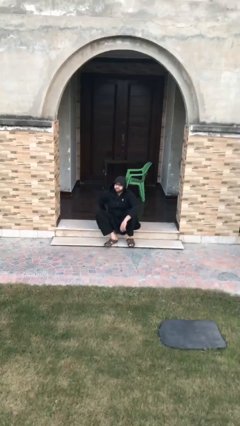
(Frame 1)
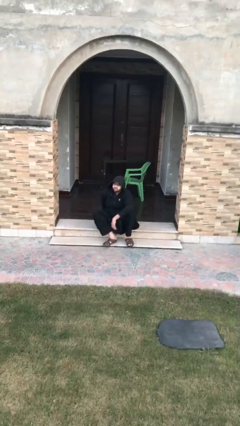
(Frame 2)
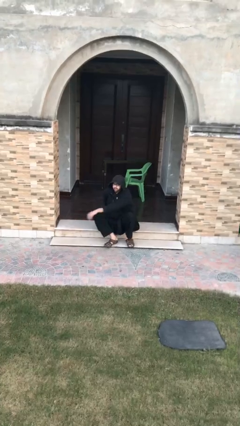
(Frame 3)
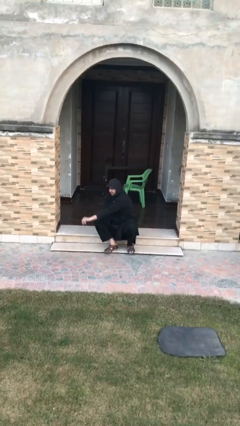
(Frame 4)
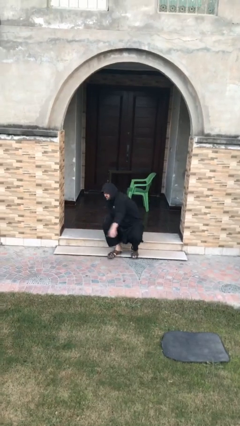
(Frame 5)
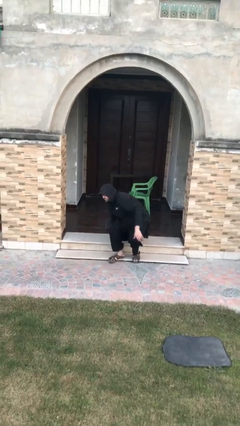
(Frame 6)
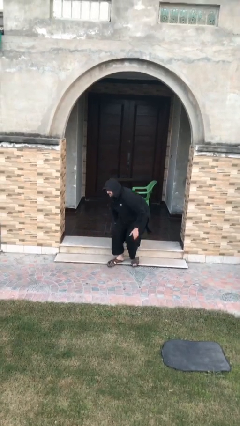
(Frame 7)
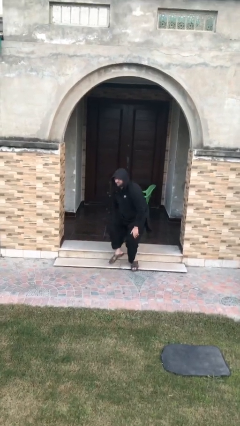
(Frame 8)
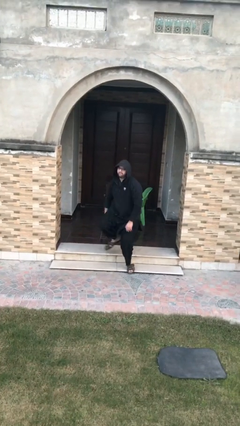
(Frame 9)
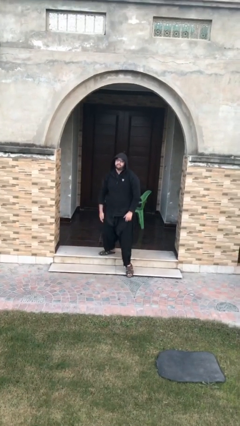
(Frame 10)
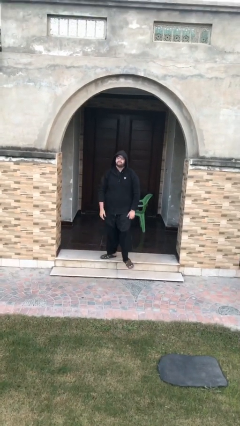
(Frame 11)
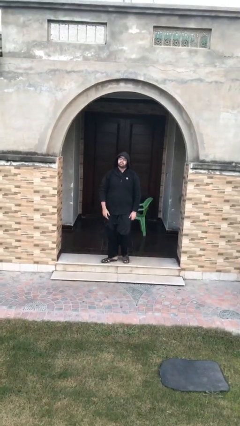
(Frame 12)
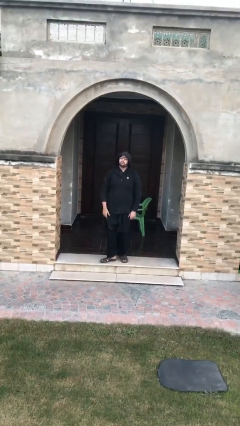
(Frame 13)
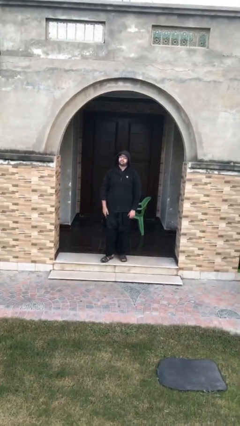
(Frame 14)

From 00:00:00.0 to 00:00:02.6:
person stands up

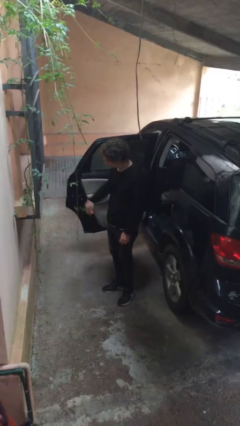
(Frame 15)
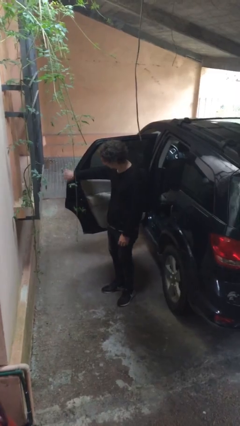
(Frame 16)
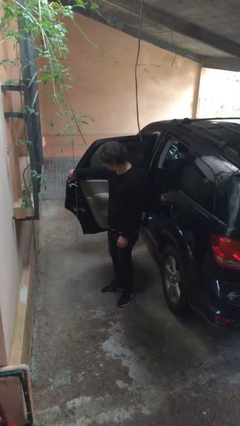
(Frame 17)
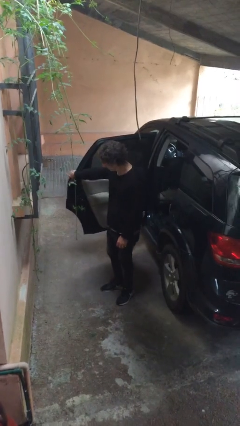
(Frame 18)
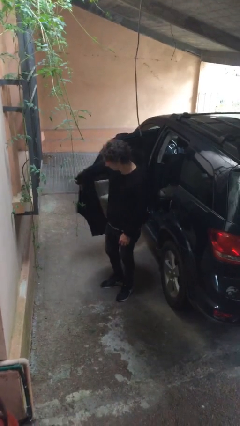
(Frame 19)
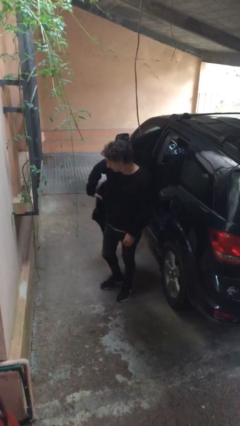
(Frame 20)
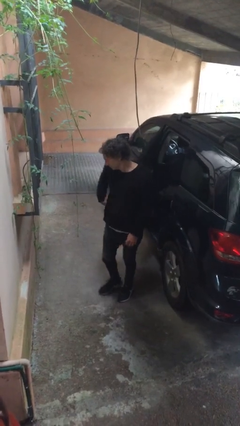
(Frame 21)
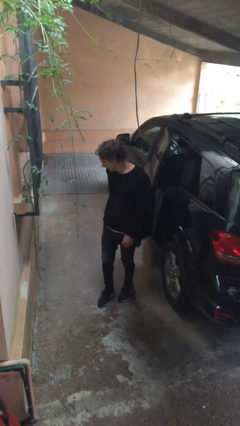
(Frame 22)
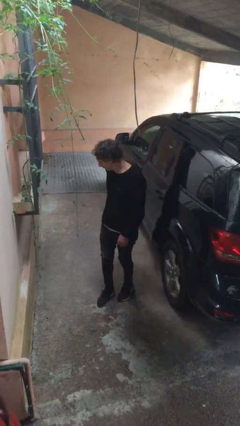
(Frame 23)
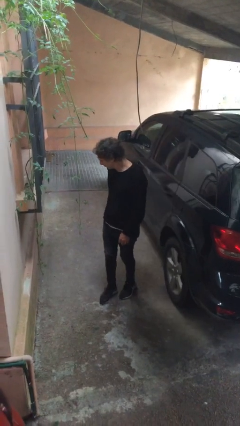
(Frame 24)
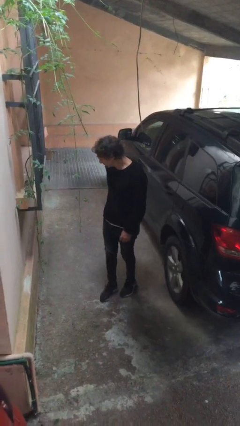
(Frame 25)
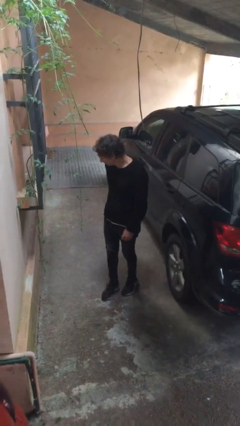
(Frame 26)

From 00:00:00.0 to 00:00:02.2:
person closes car door

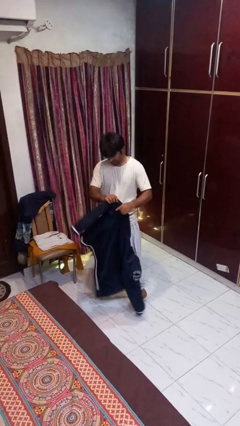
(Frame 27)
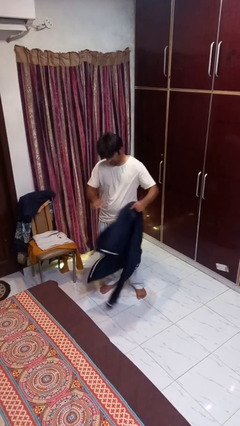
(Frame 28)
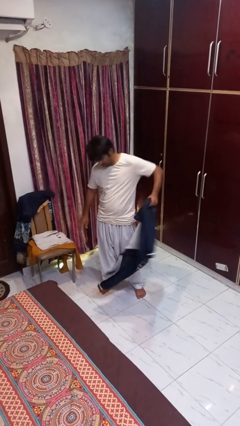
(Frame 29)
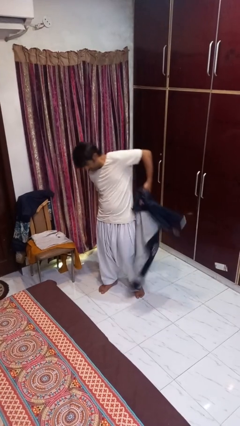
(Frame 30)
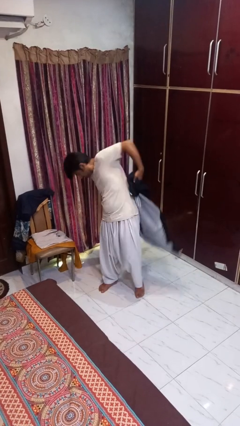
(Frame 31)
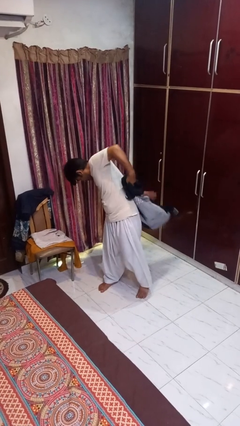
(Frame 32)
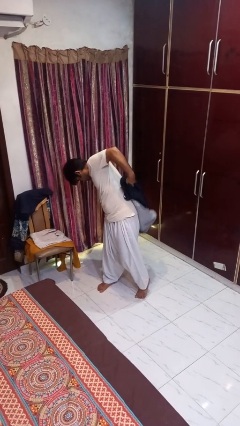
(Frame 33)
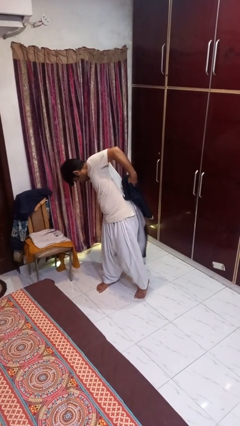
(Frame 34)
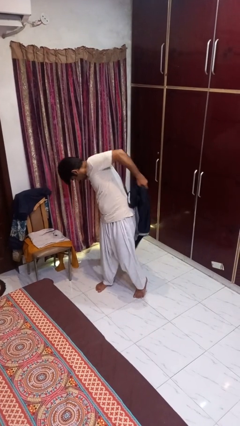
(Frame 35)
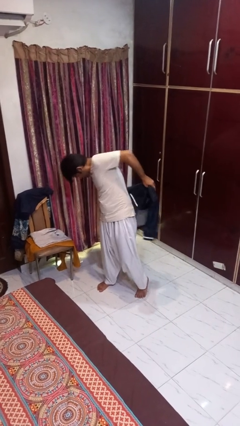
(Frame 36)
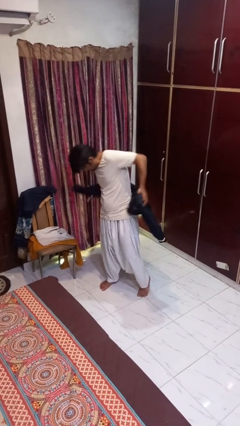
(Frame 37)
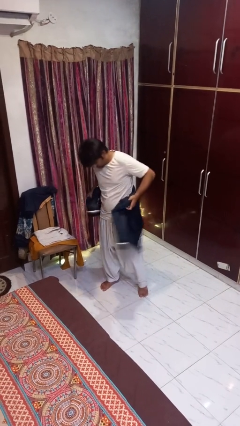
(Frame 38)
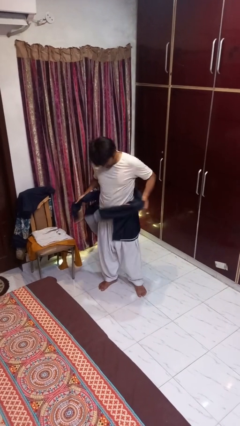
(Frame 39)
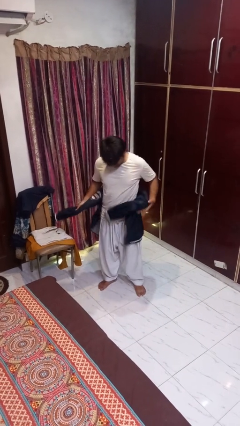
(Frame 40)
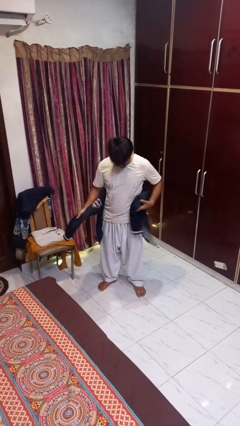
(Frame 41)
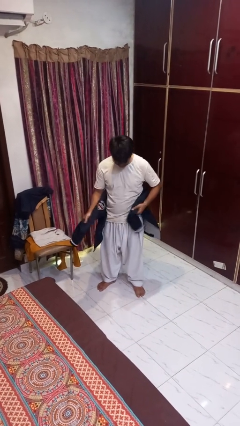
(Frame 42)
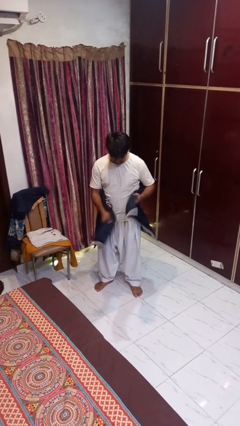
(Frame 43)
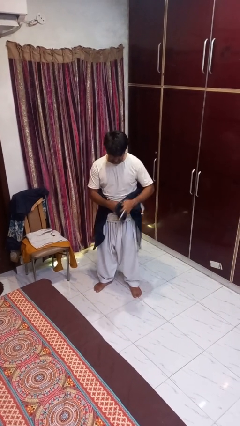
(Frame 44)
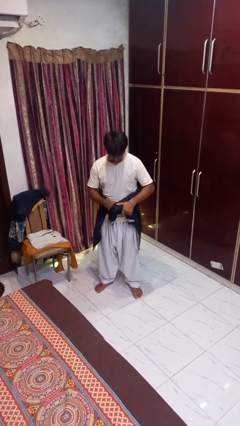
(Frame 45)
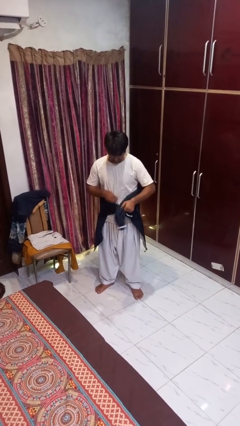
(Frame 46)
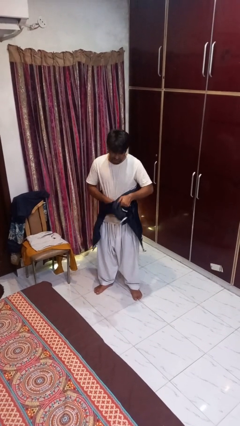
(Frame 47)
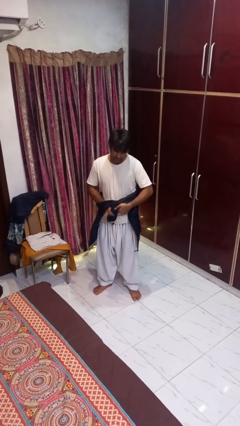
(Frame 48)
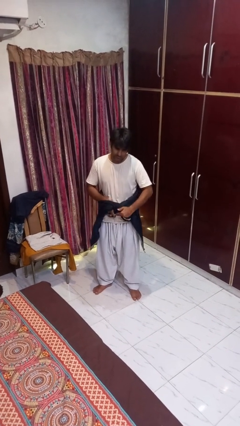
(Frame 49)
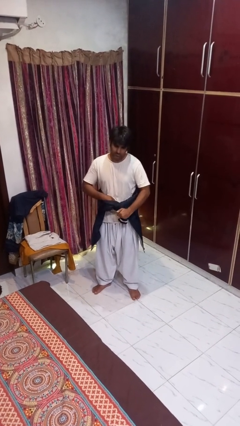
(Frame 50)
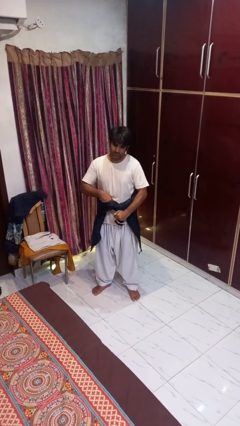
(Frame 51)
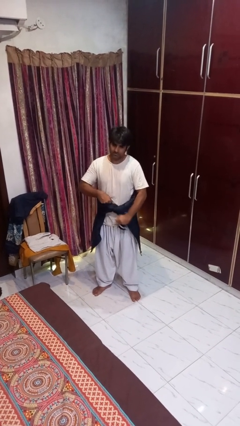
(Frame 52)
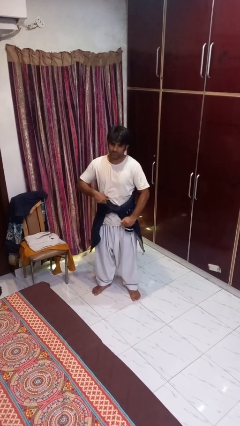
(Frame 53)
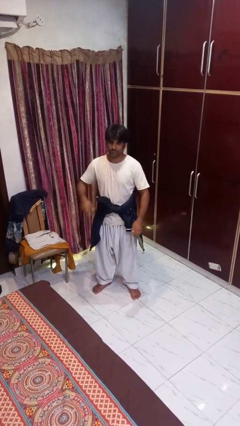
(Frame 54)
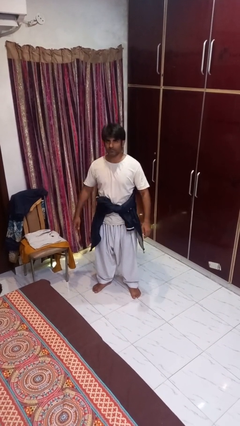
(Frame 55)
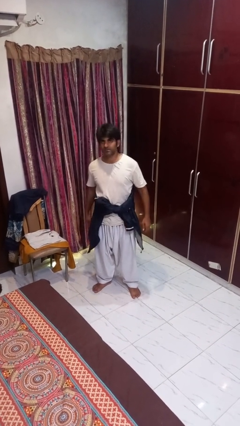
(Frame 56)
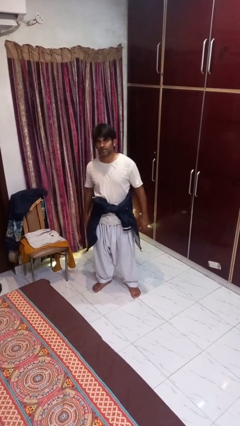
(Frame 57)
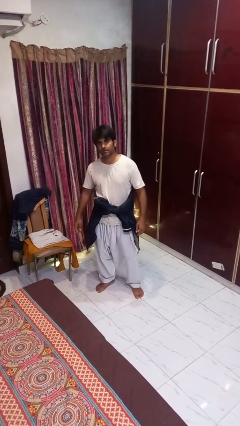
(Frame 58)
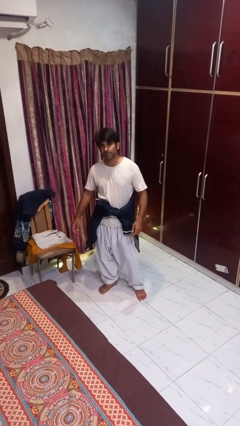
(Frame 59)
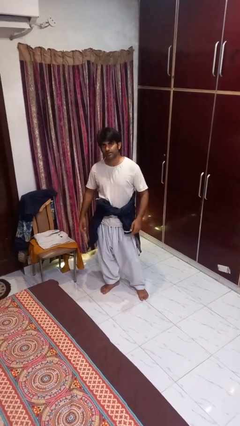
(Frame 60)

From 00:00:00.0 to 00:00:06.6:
person ties jacket around waist

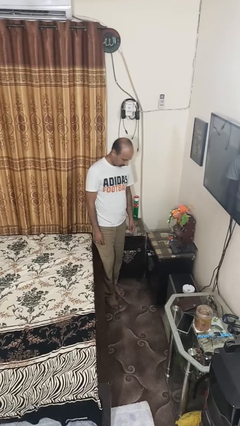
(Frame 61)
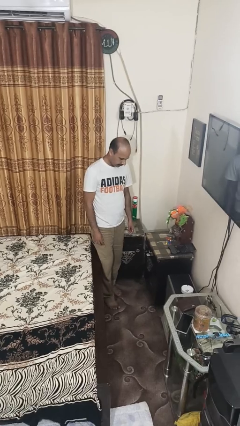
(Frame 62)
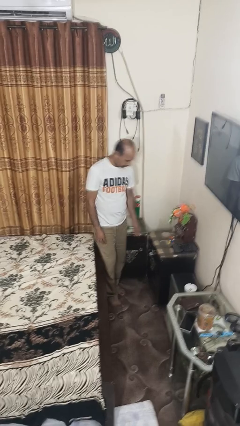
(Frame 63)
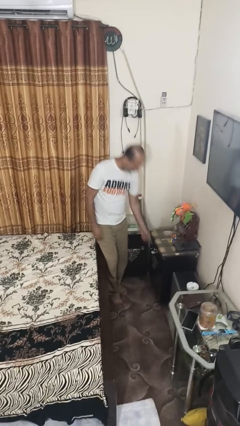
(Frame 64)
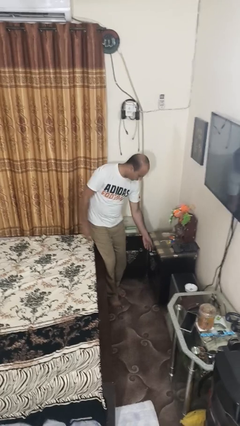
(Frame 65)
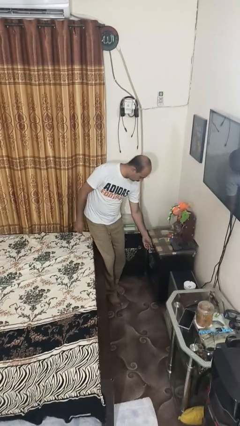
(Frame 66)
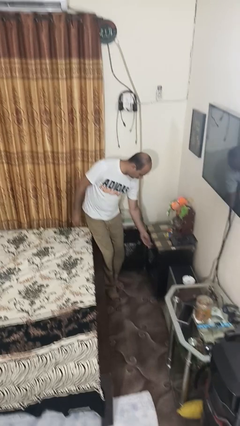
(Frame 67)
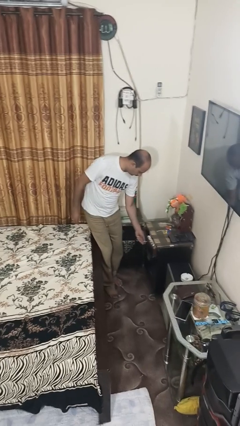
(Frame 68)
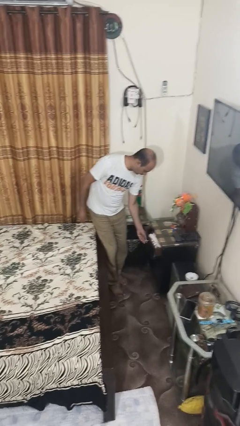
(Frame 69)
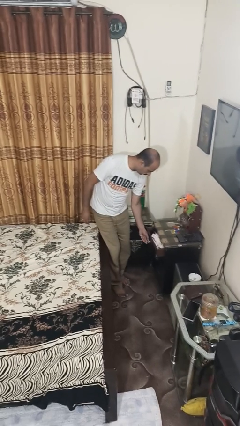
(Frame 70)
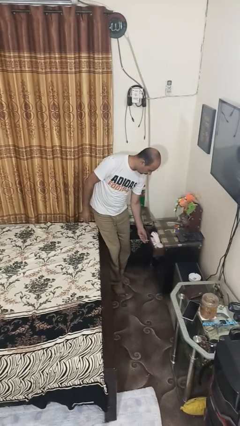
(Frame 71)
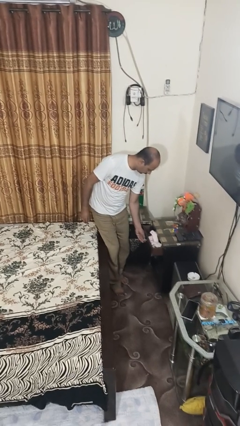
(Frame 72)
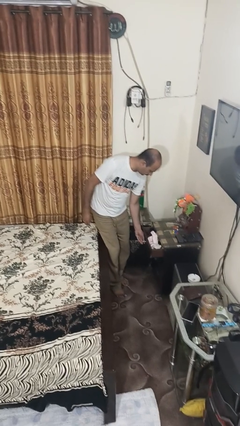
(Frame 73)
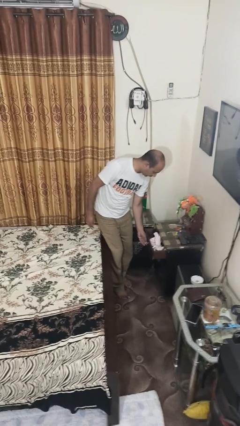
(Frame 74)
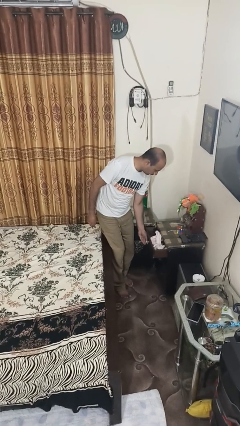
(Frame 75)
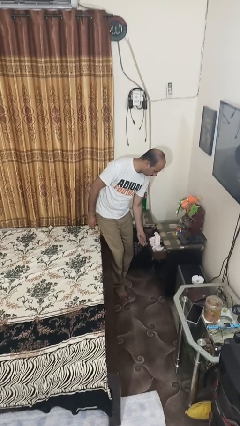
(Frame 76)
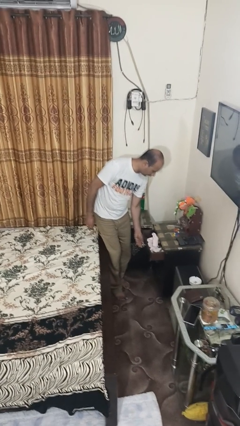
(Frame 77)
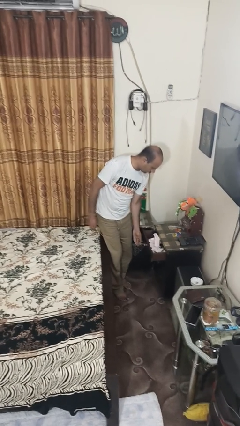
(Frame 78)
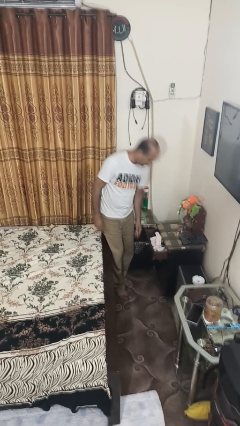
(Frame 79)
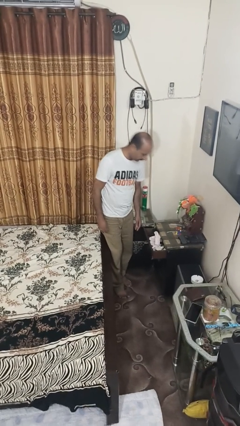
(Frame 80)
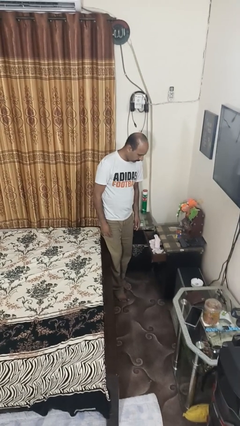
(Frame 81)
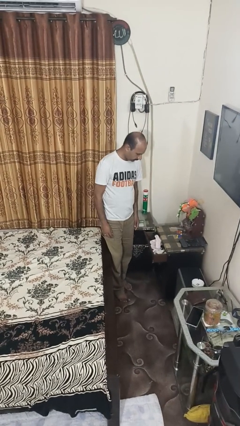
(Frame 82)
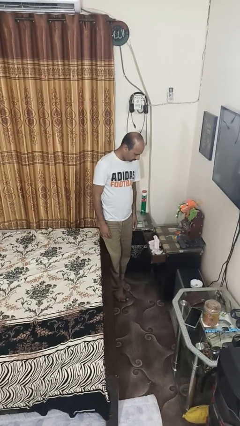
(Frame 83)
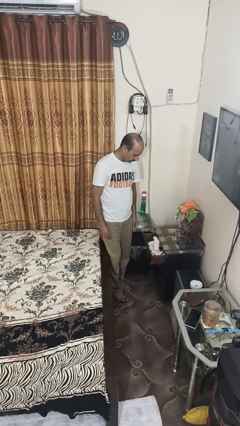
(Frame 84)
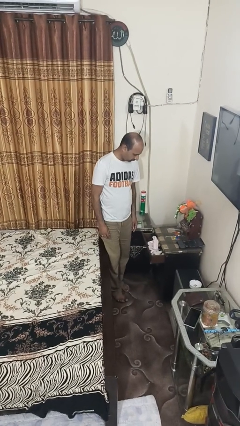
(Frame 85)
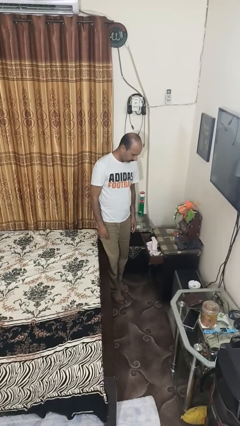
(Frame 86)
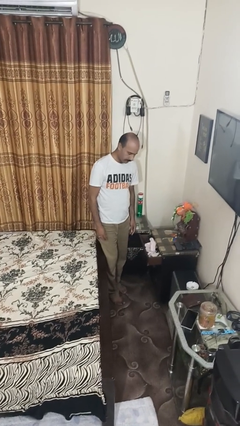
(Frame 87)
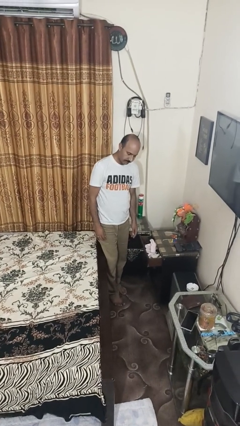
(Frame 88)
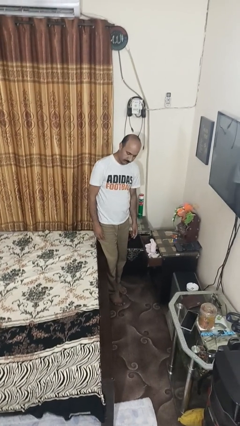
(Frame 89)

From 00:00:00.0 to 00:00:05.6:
person opens dresser drawer

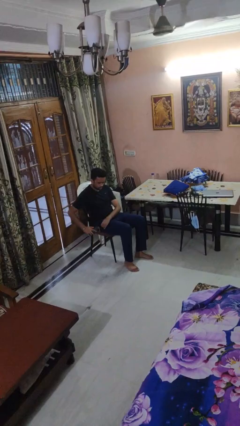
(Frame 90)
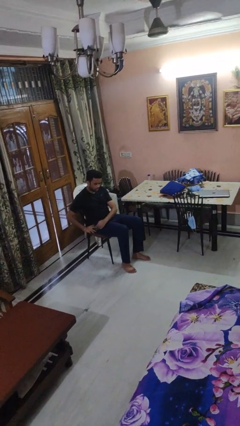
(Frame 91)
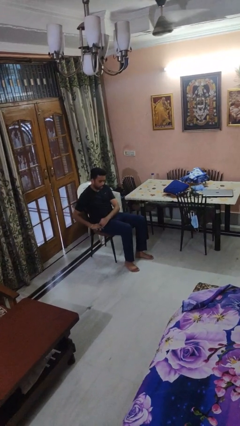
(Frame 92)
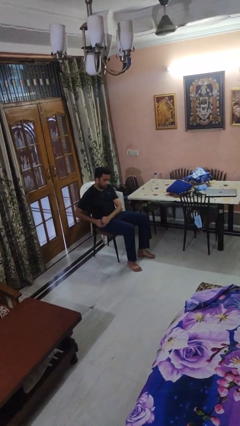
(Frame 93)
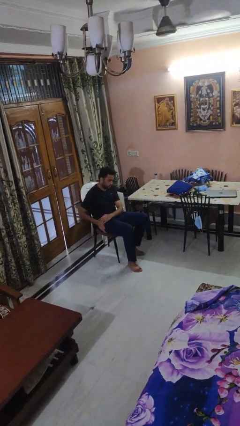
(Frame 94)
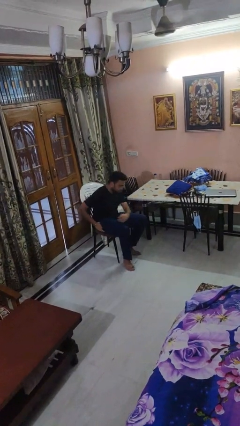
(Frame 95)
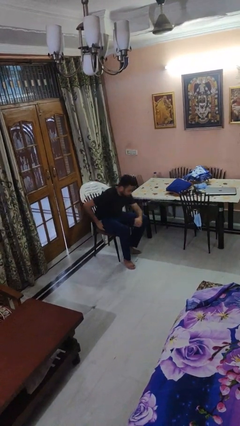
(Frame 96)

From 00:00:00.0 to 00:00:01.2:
person puts phone into pocket
